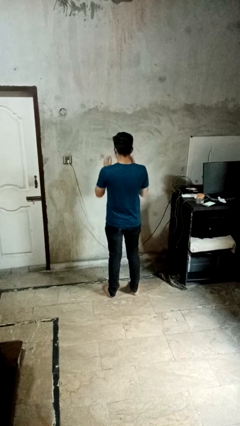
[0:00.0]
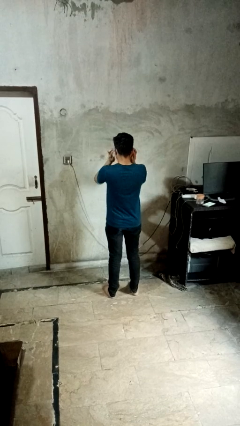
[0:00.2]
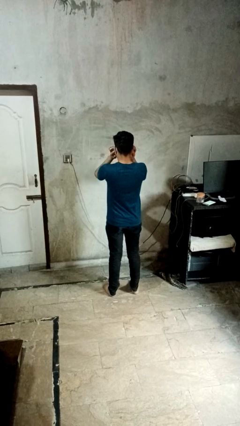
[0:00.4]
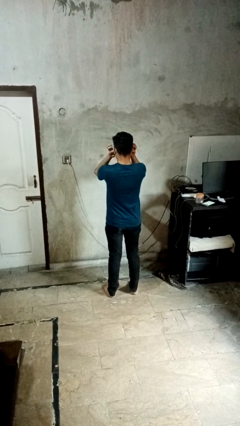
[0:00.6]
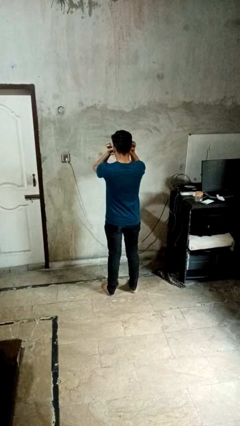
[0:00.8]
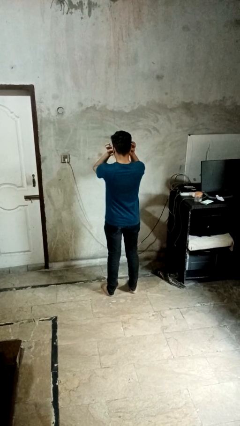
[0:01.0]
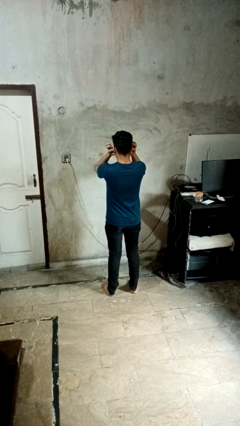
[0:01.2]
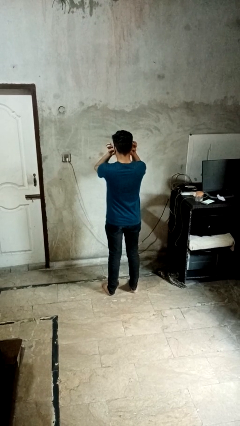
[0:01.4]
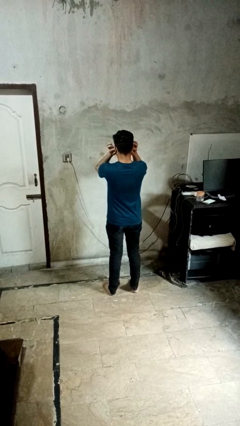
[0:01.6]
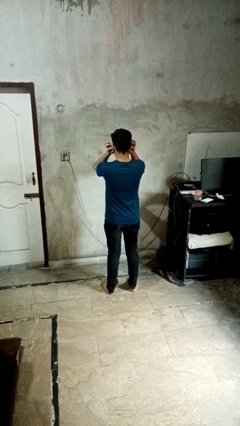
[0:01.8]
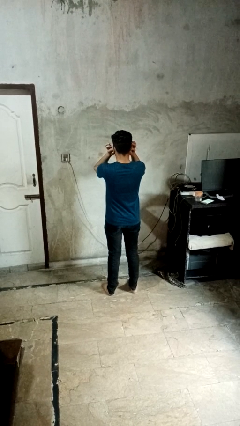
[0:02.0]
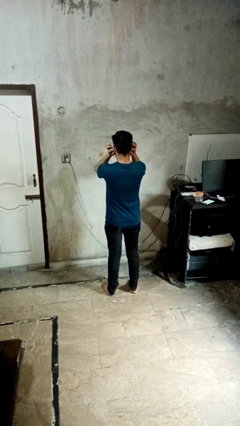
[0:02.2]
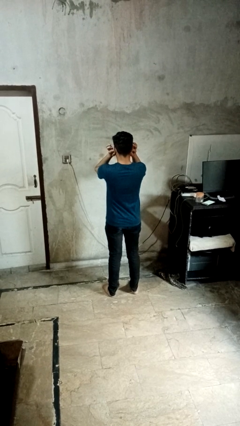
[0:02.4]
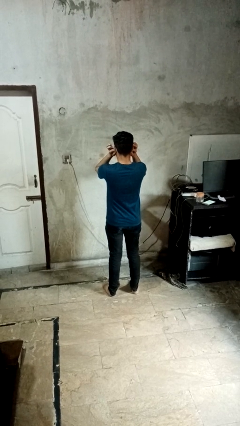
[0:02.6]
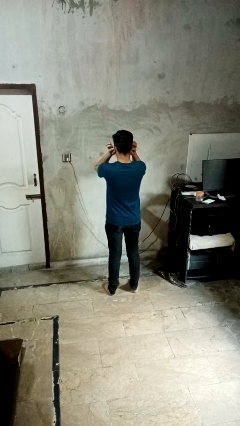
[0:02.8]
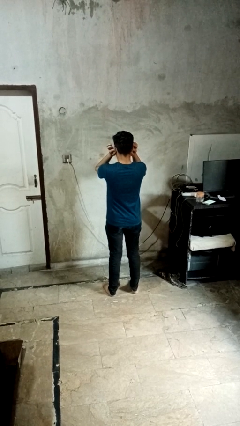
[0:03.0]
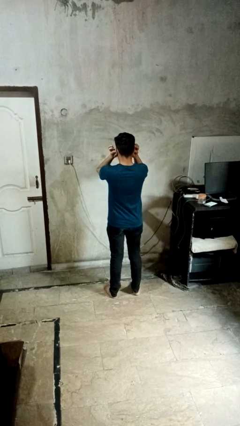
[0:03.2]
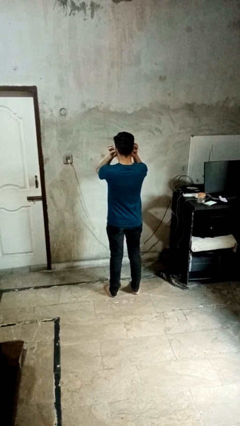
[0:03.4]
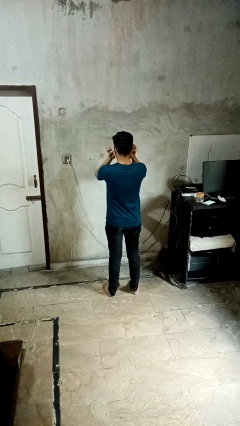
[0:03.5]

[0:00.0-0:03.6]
person puts fingers in ear

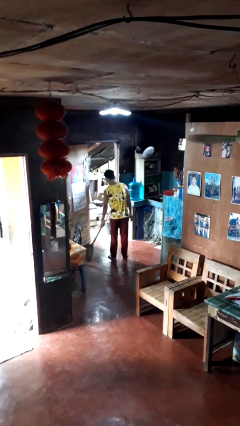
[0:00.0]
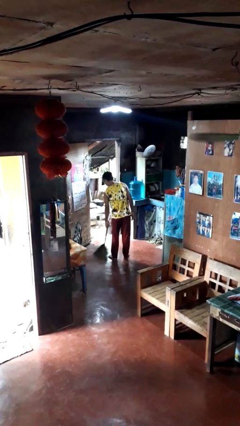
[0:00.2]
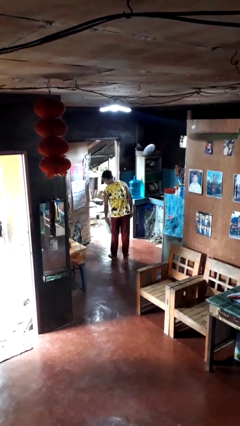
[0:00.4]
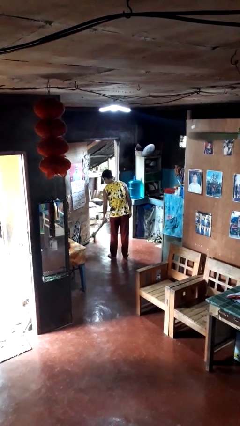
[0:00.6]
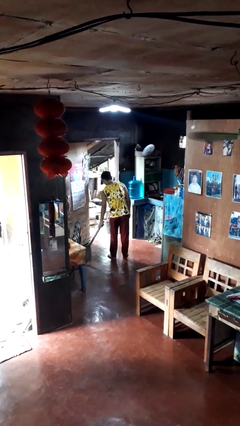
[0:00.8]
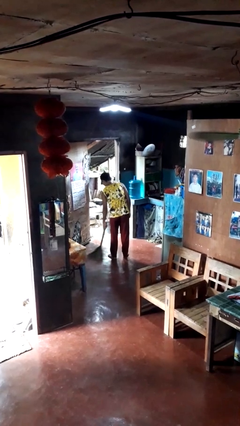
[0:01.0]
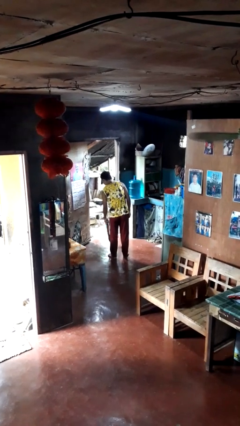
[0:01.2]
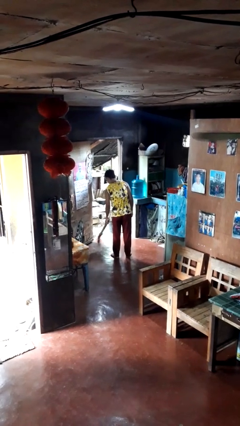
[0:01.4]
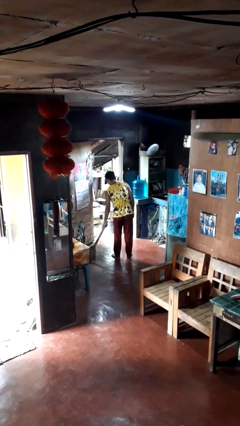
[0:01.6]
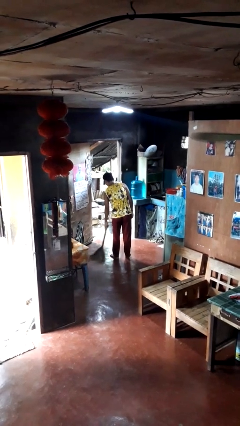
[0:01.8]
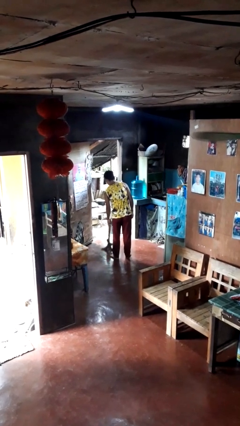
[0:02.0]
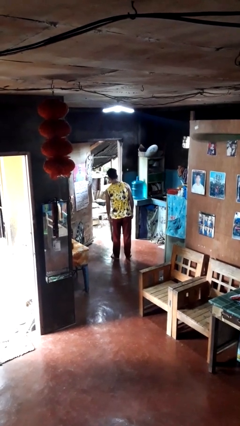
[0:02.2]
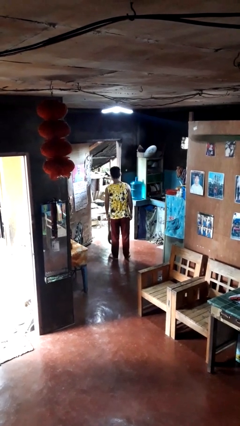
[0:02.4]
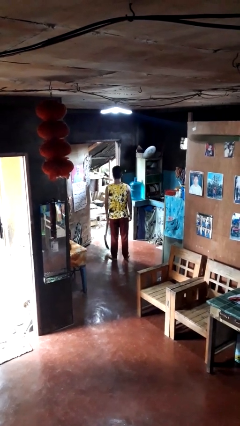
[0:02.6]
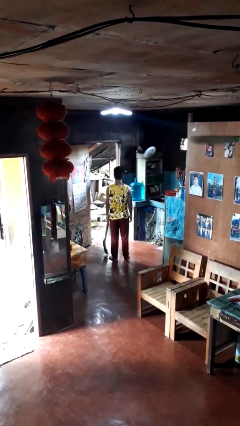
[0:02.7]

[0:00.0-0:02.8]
person sweeps floor

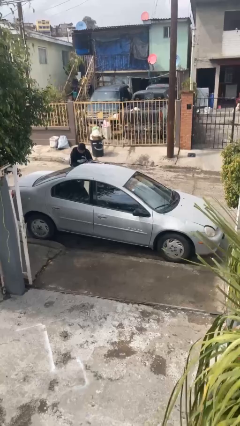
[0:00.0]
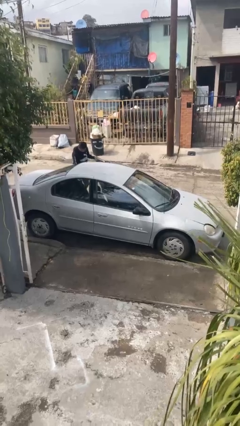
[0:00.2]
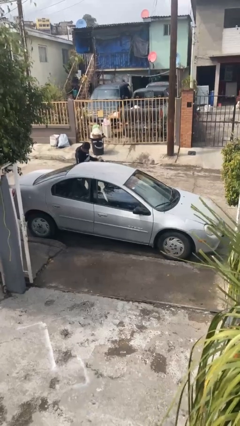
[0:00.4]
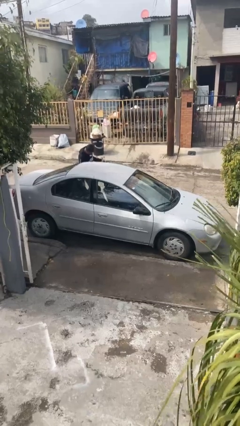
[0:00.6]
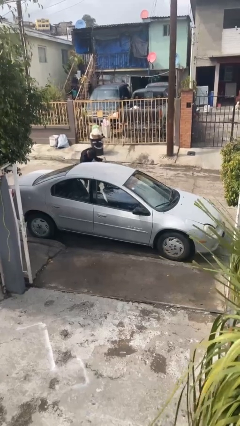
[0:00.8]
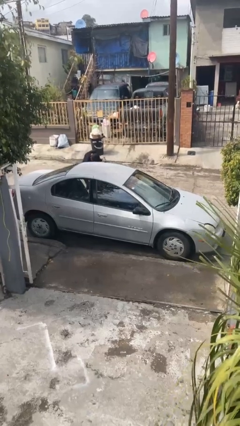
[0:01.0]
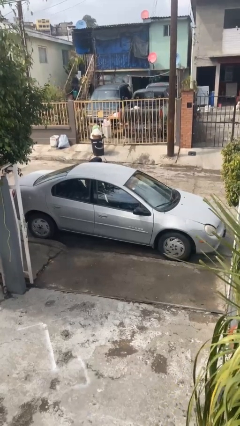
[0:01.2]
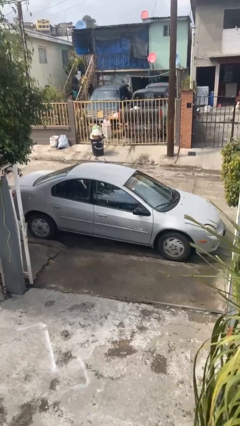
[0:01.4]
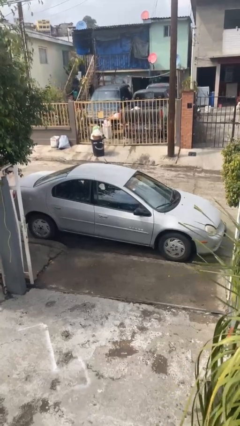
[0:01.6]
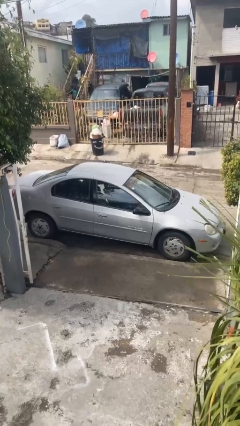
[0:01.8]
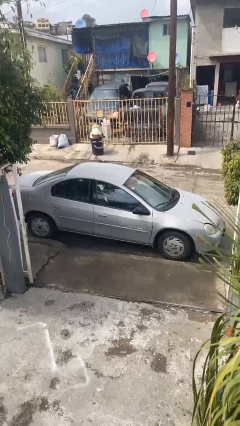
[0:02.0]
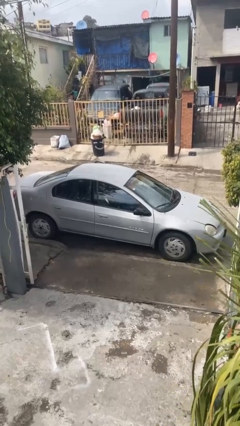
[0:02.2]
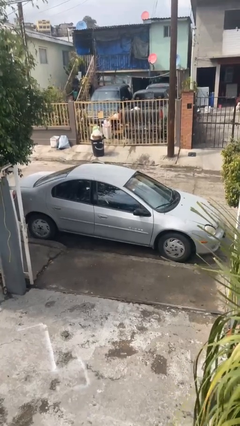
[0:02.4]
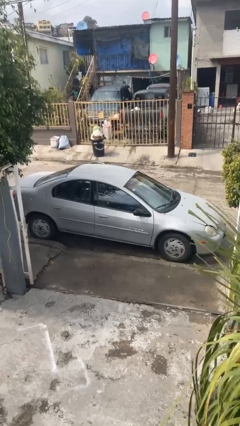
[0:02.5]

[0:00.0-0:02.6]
car picks up person

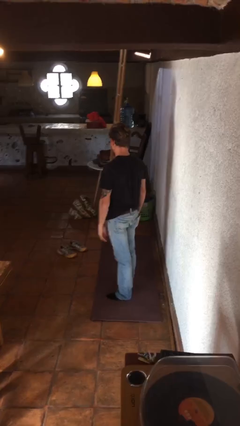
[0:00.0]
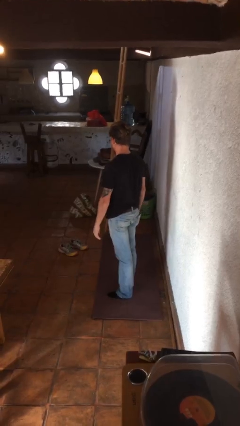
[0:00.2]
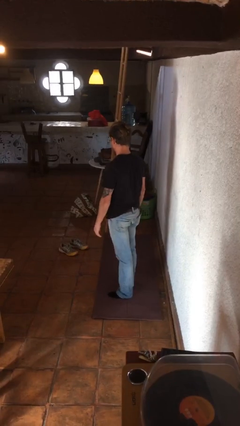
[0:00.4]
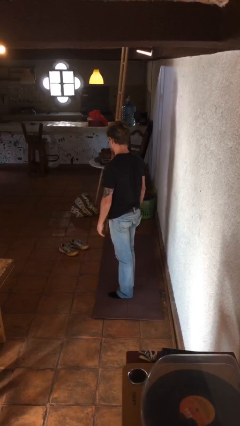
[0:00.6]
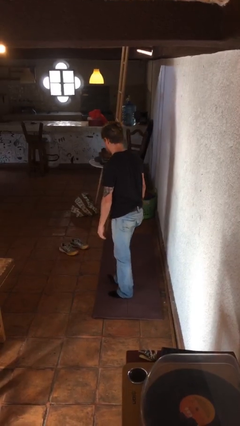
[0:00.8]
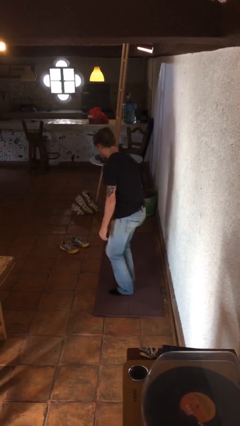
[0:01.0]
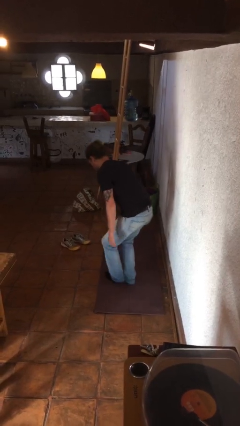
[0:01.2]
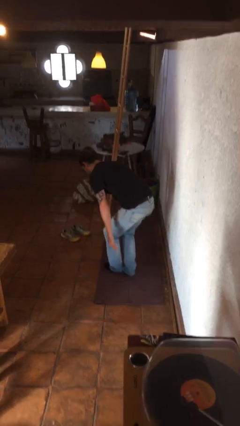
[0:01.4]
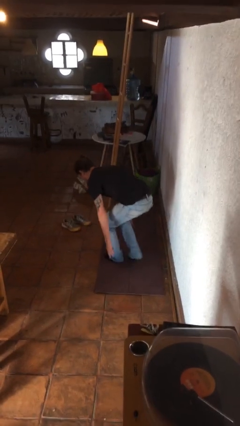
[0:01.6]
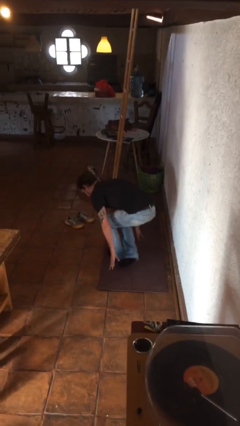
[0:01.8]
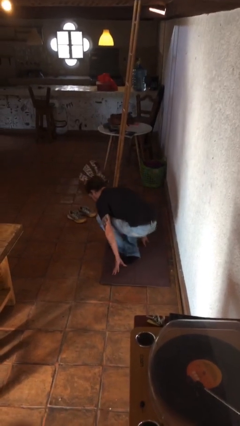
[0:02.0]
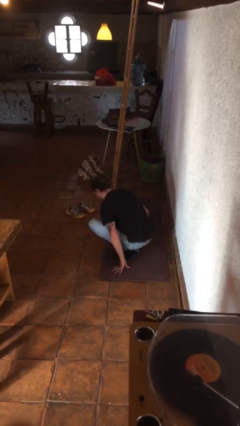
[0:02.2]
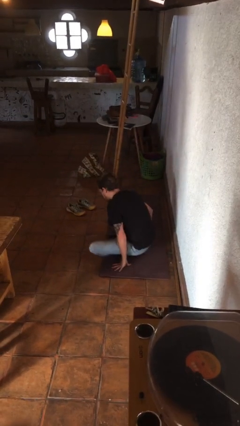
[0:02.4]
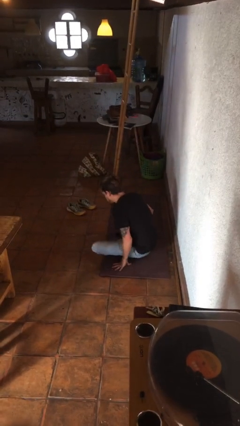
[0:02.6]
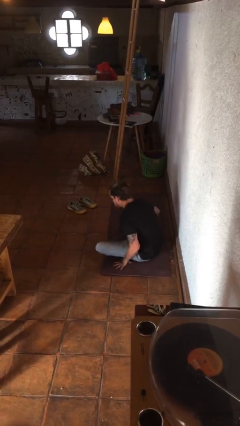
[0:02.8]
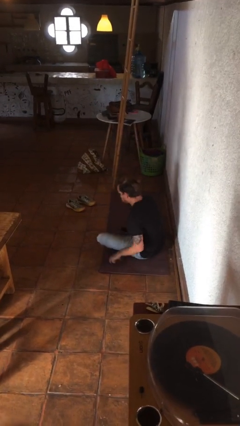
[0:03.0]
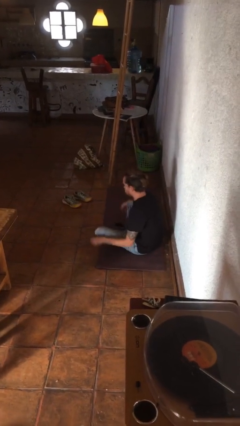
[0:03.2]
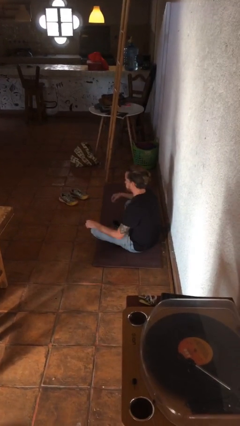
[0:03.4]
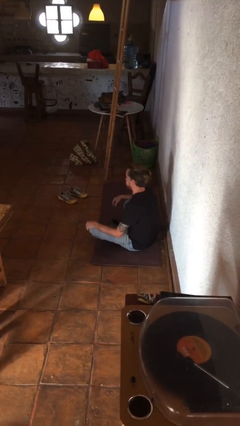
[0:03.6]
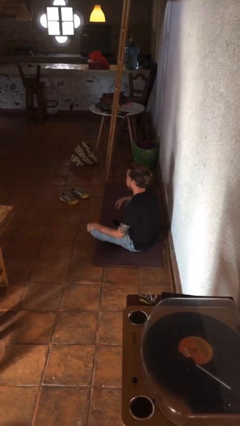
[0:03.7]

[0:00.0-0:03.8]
person sits crisscross

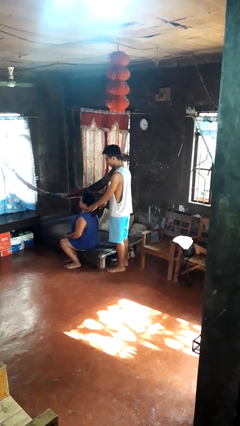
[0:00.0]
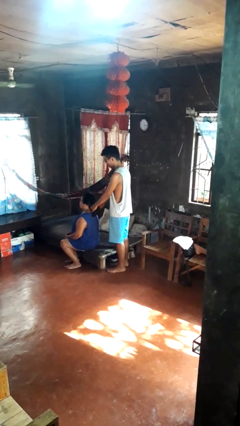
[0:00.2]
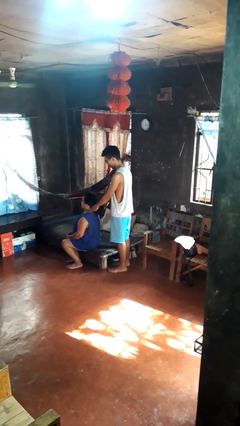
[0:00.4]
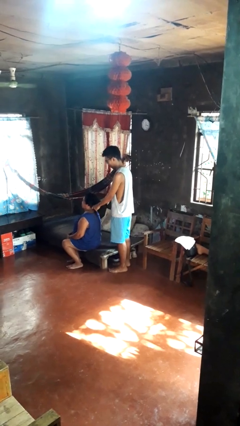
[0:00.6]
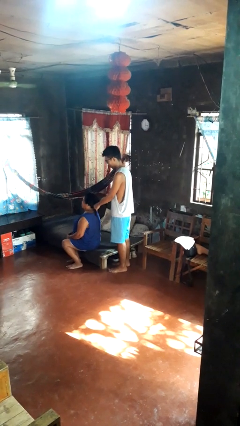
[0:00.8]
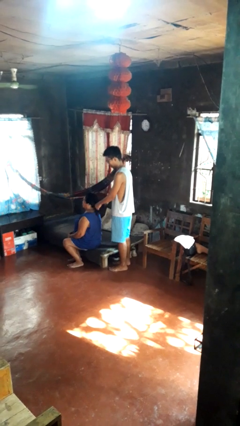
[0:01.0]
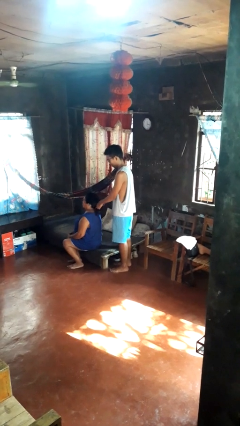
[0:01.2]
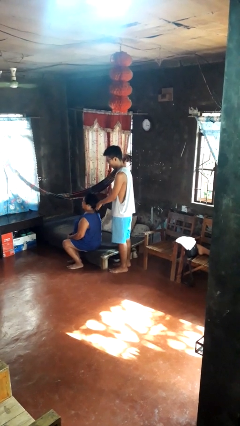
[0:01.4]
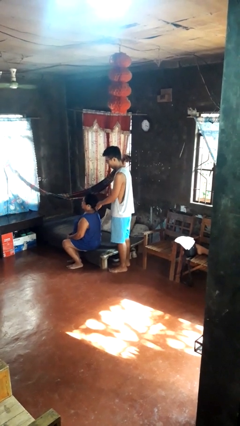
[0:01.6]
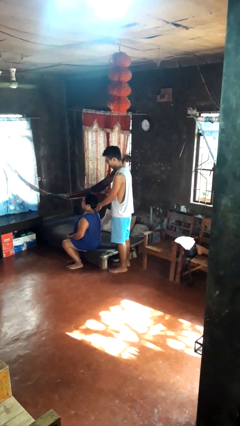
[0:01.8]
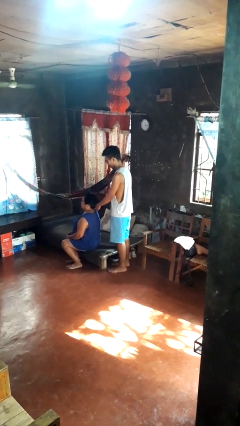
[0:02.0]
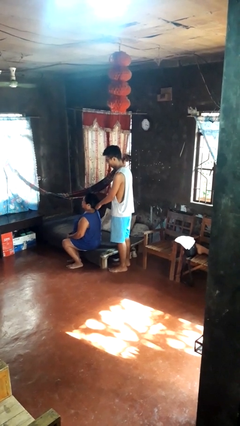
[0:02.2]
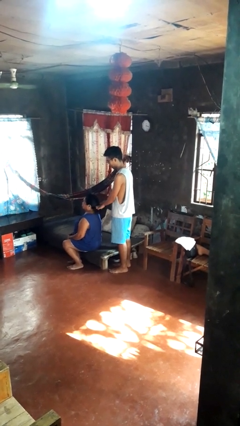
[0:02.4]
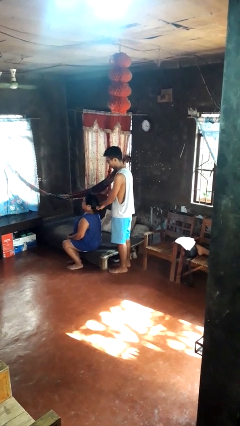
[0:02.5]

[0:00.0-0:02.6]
person braids hair of person

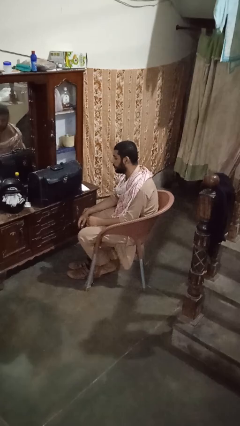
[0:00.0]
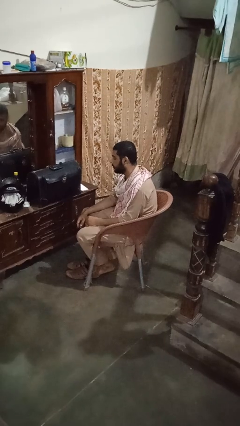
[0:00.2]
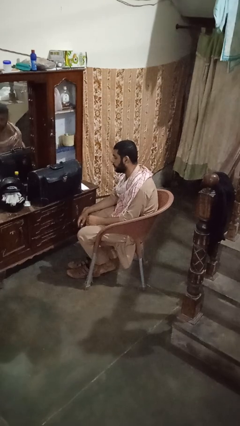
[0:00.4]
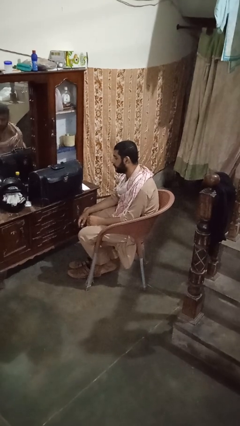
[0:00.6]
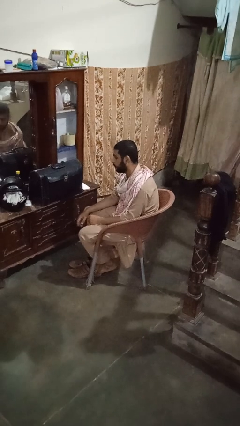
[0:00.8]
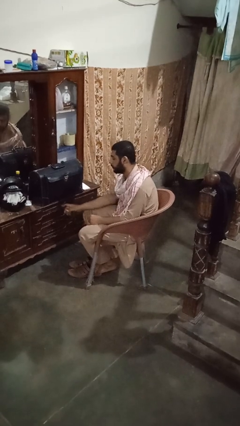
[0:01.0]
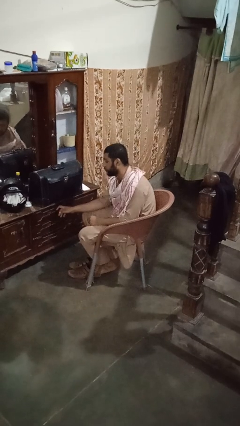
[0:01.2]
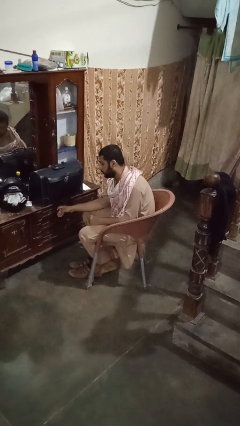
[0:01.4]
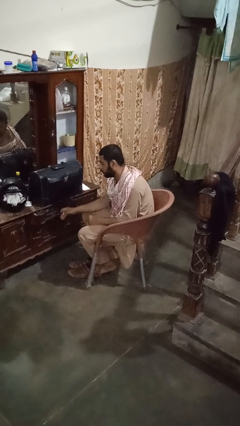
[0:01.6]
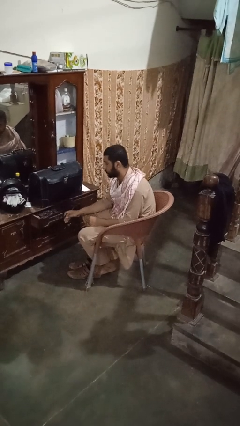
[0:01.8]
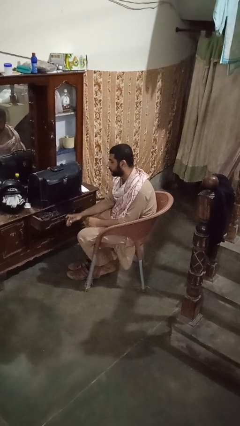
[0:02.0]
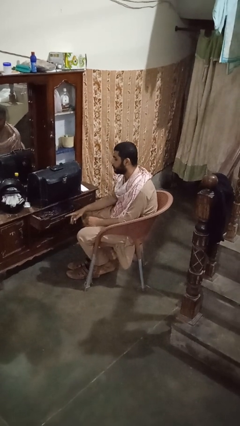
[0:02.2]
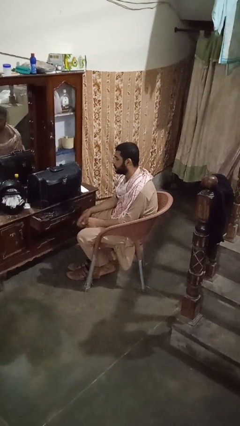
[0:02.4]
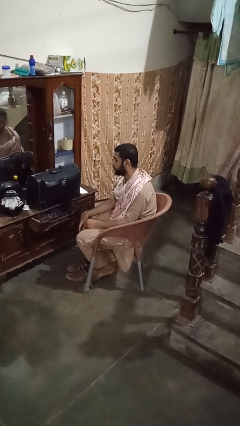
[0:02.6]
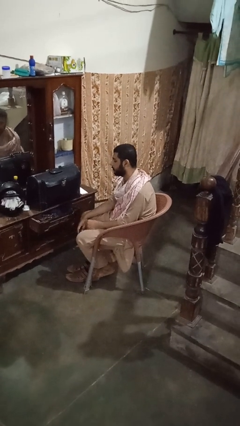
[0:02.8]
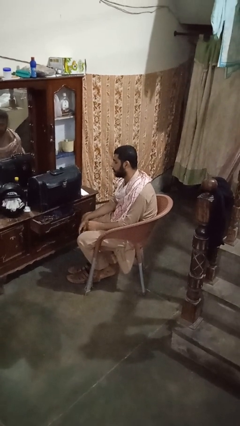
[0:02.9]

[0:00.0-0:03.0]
person opens dresser drawer
